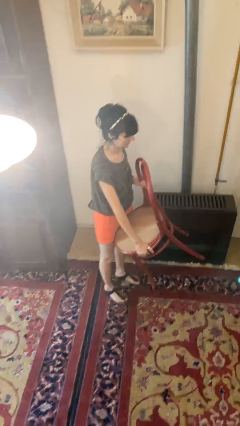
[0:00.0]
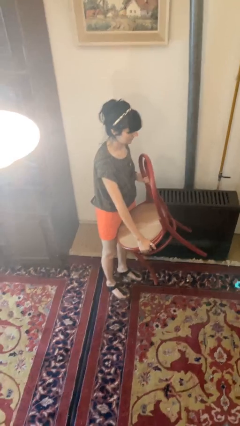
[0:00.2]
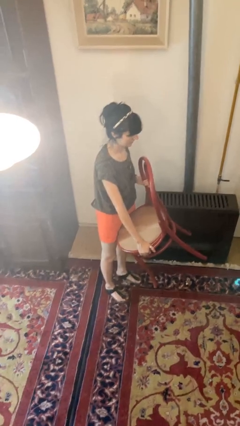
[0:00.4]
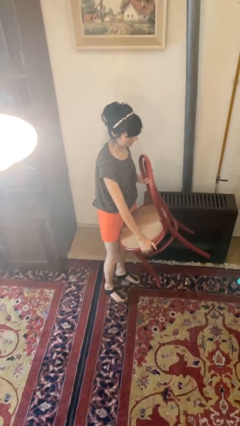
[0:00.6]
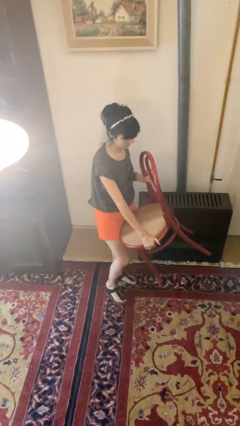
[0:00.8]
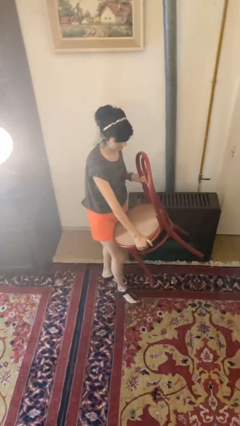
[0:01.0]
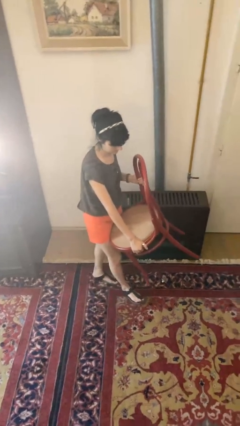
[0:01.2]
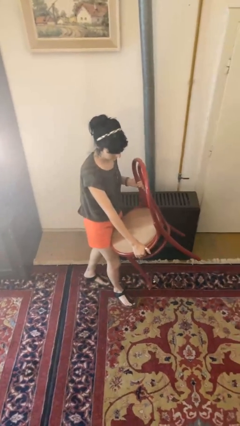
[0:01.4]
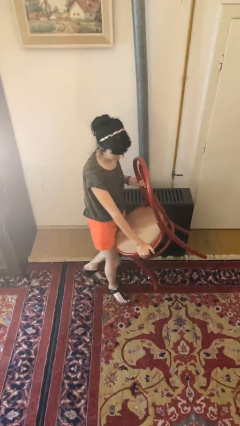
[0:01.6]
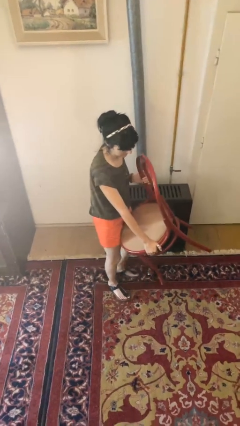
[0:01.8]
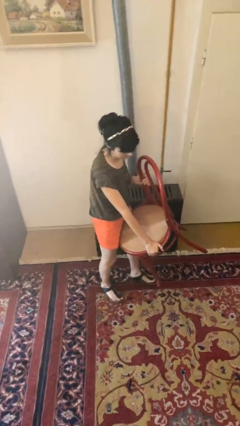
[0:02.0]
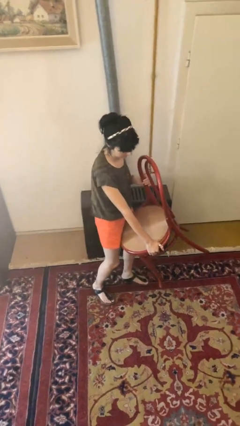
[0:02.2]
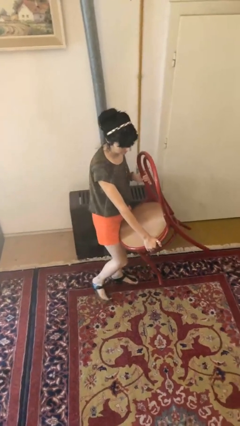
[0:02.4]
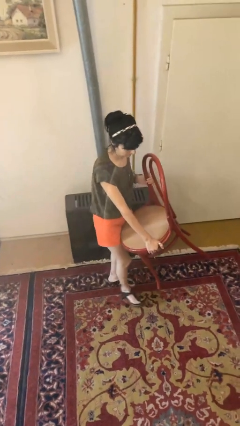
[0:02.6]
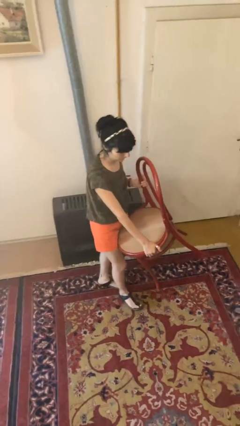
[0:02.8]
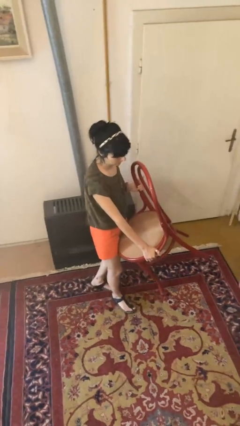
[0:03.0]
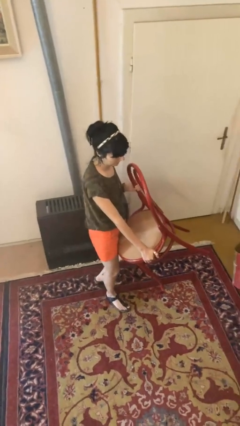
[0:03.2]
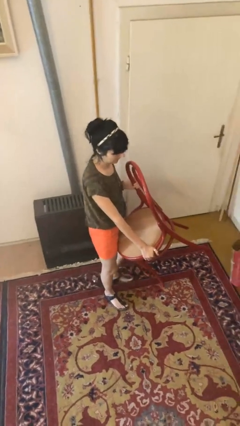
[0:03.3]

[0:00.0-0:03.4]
person carries furniture

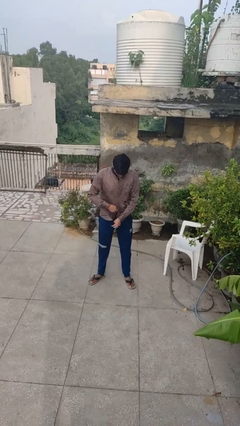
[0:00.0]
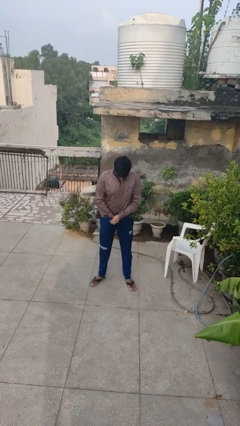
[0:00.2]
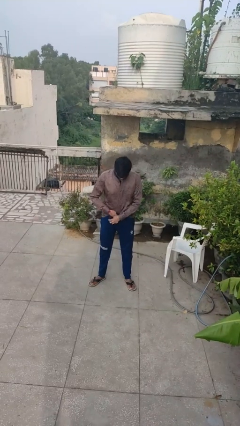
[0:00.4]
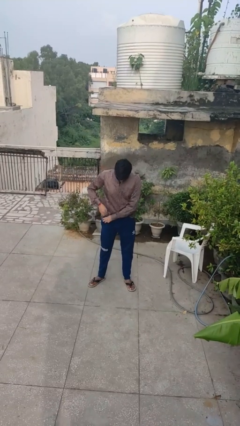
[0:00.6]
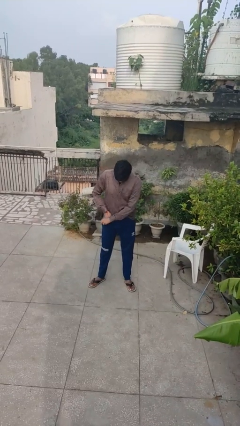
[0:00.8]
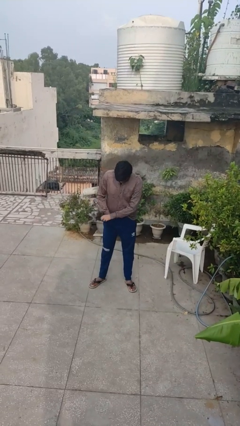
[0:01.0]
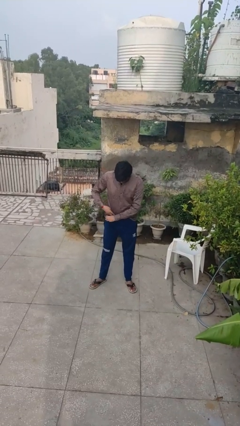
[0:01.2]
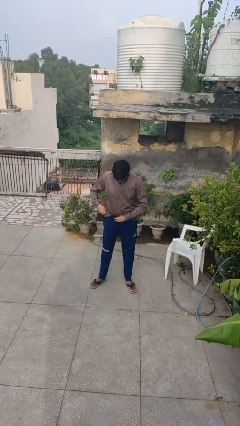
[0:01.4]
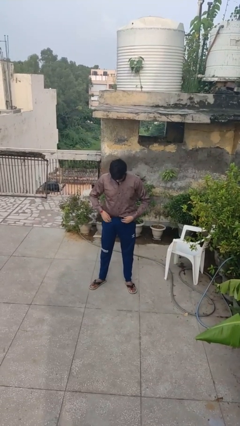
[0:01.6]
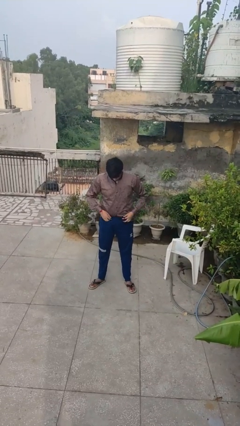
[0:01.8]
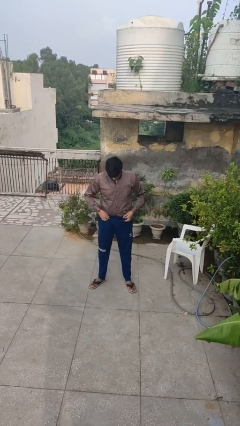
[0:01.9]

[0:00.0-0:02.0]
person tucks in shirt

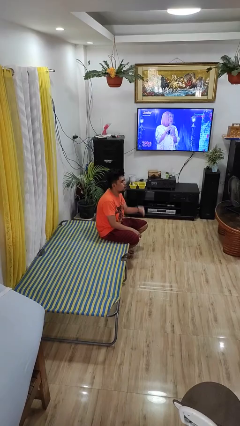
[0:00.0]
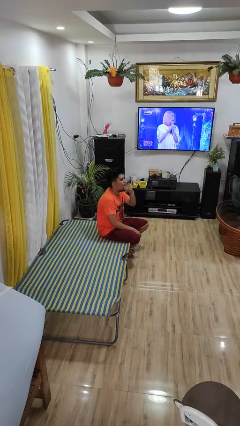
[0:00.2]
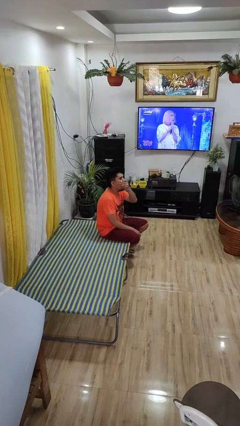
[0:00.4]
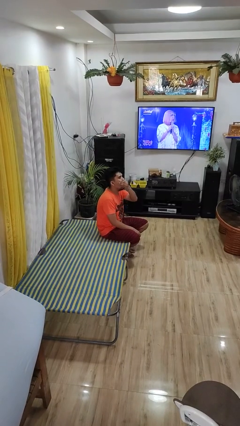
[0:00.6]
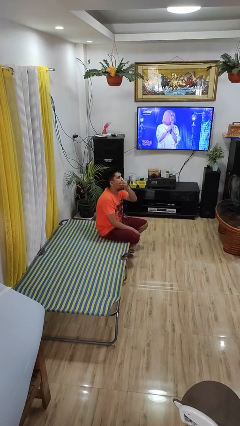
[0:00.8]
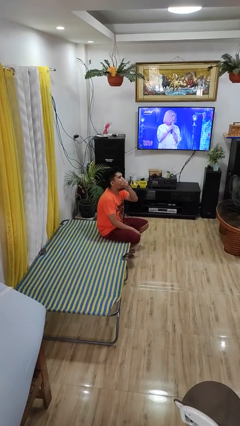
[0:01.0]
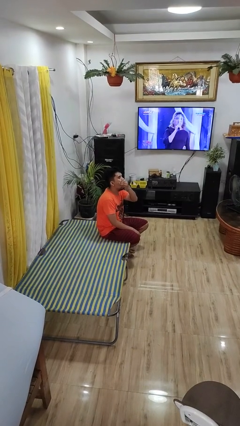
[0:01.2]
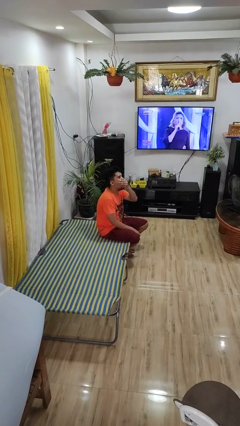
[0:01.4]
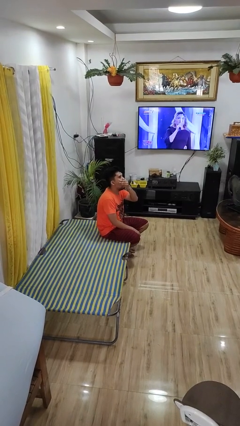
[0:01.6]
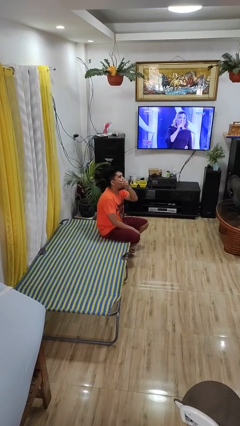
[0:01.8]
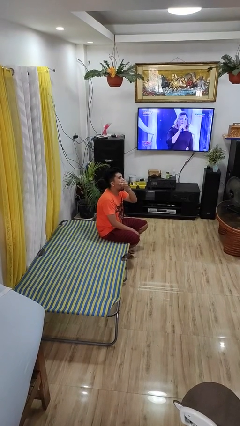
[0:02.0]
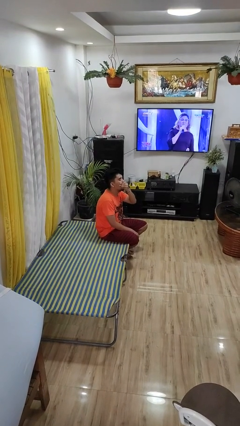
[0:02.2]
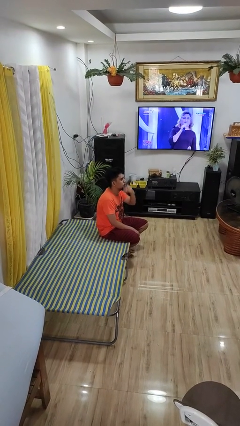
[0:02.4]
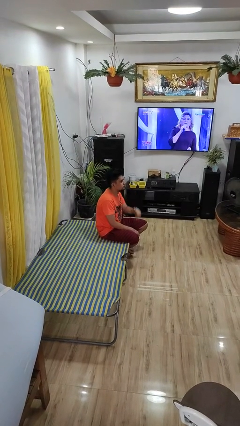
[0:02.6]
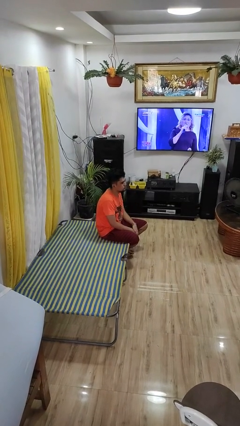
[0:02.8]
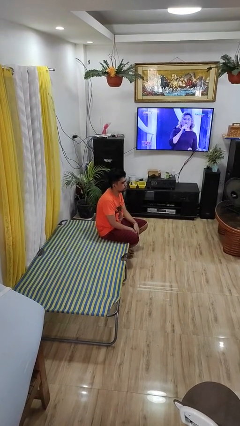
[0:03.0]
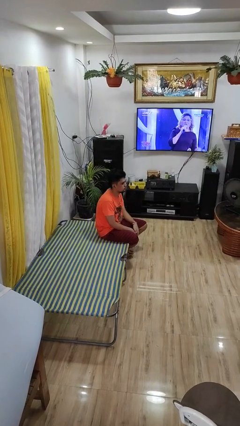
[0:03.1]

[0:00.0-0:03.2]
person yawns

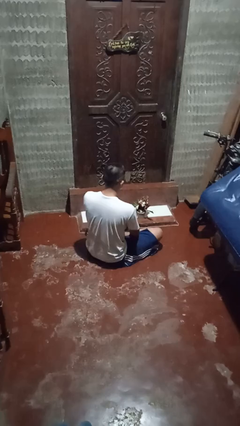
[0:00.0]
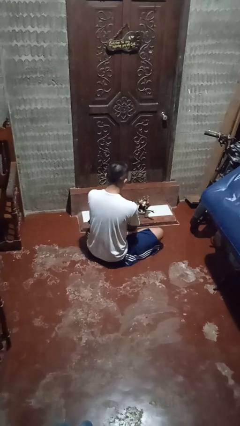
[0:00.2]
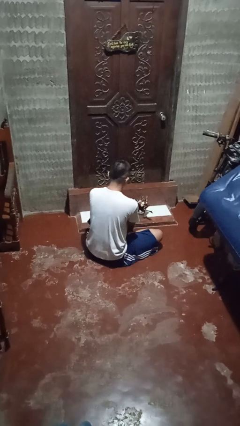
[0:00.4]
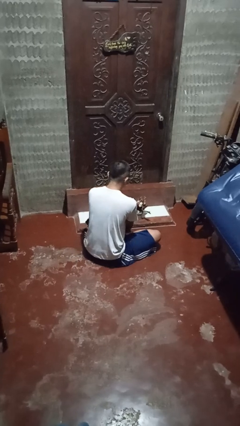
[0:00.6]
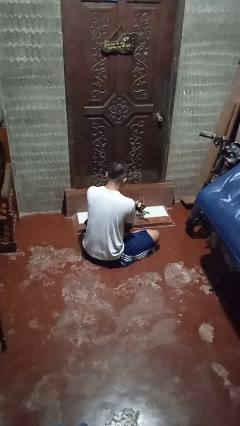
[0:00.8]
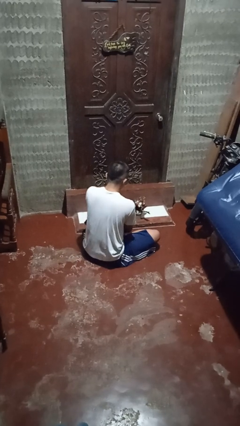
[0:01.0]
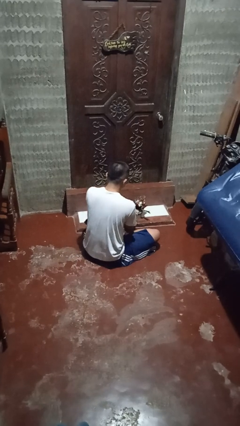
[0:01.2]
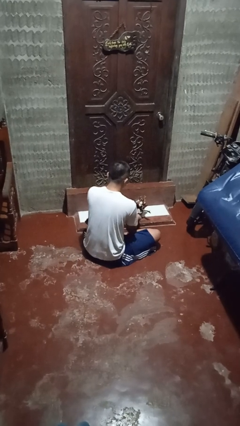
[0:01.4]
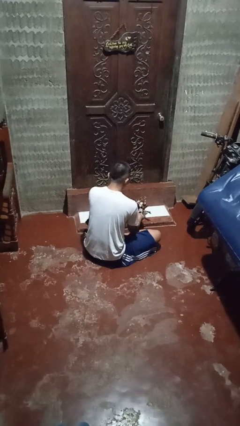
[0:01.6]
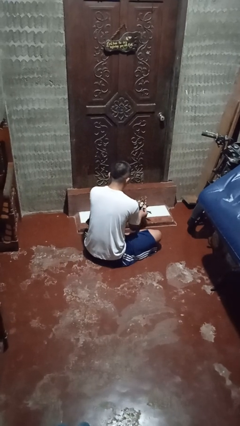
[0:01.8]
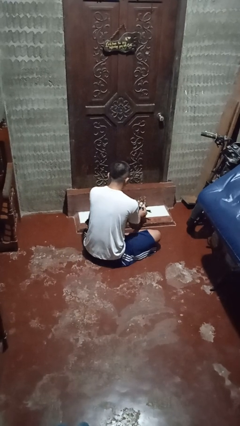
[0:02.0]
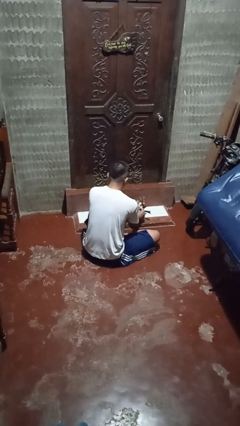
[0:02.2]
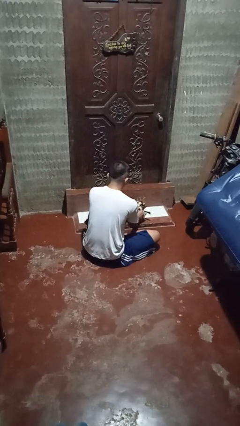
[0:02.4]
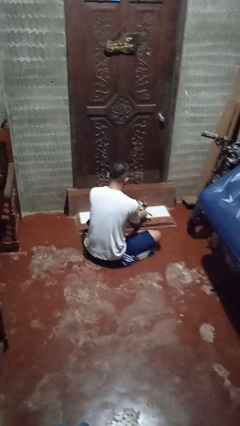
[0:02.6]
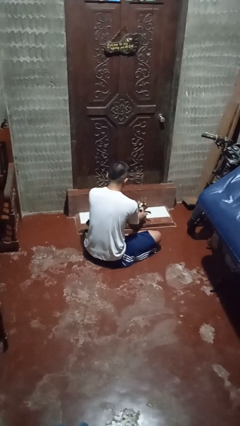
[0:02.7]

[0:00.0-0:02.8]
person arranges flowers in vase

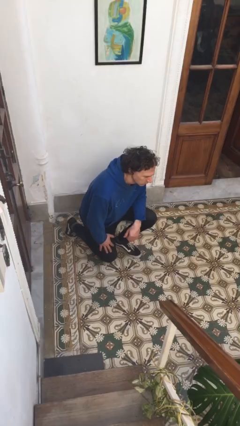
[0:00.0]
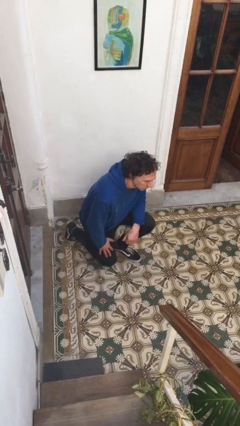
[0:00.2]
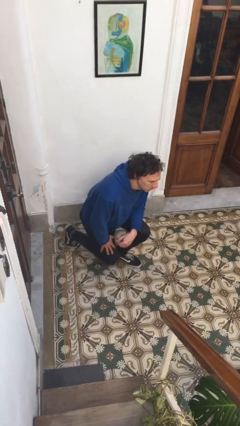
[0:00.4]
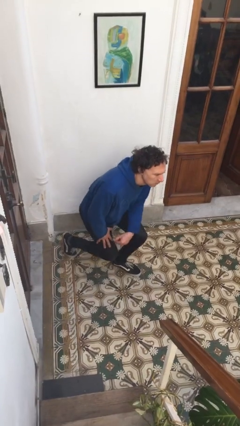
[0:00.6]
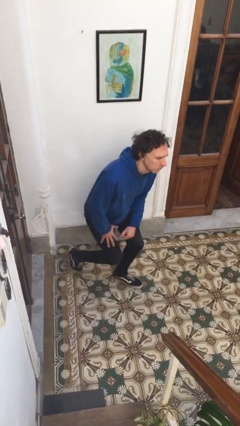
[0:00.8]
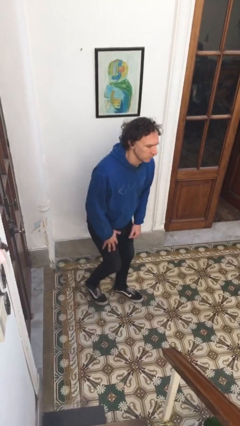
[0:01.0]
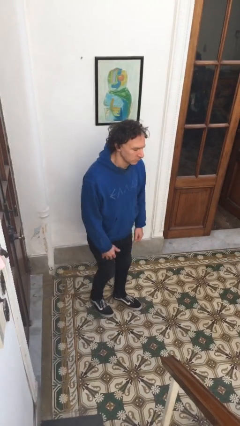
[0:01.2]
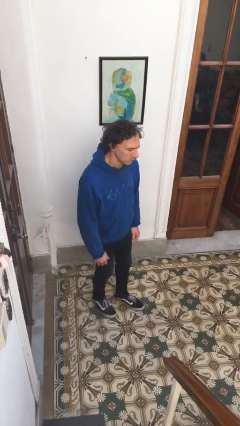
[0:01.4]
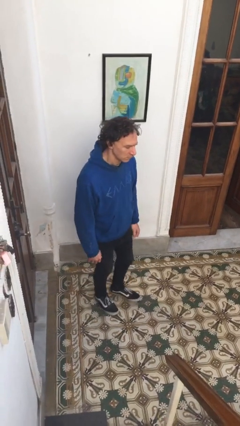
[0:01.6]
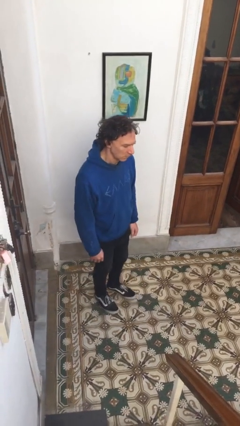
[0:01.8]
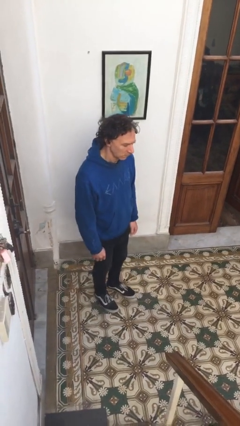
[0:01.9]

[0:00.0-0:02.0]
person stands up from floor

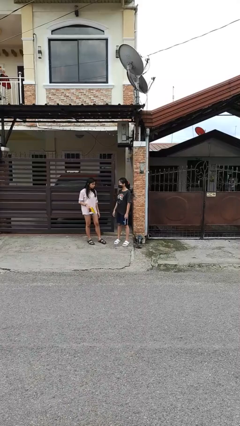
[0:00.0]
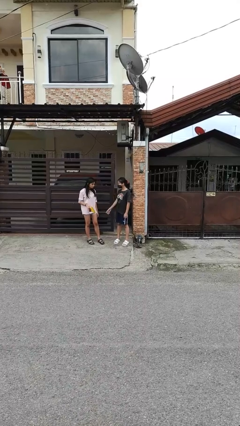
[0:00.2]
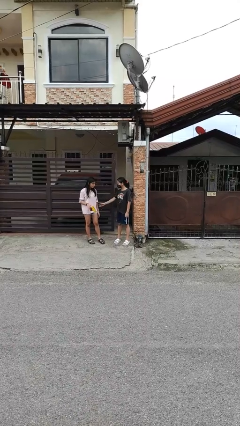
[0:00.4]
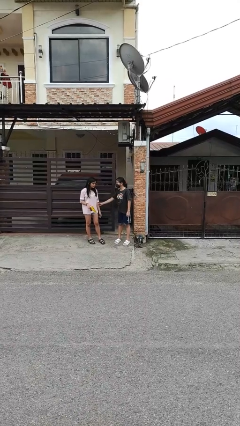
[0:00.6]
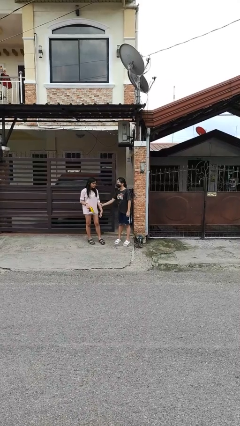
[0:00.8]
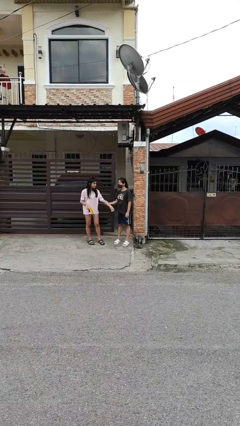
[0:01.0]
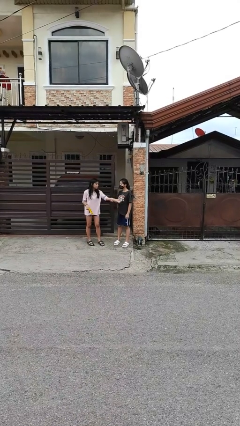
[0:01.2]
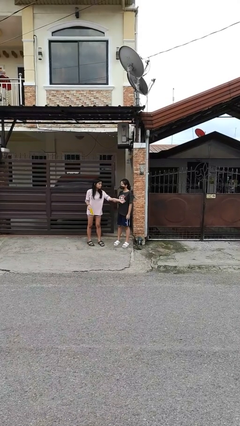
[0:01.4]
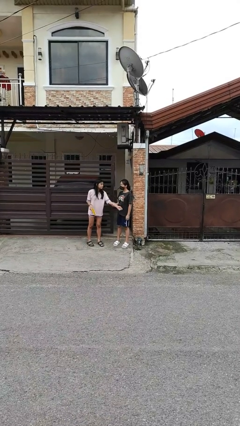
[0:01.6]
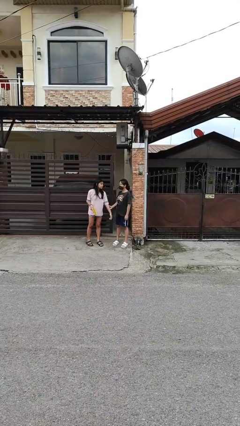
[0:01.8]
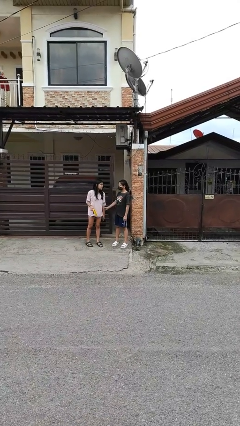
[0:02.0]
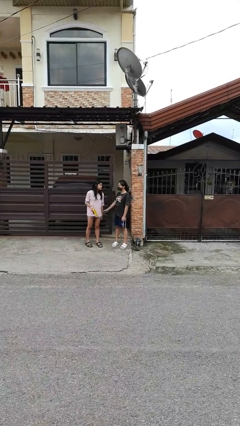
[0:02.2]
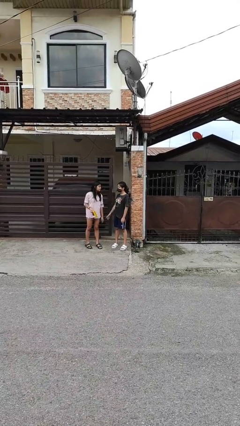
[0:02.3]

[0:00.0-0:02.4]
person grabs person by forearm

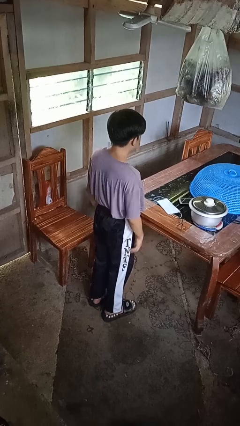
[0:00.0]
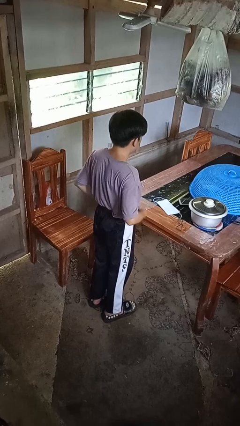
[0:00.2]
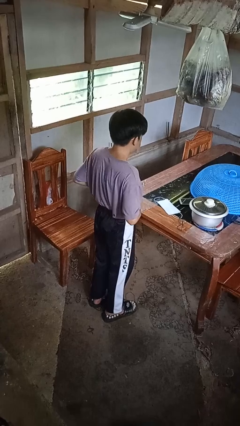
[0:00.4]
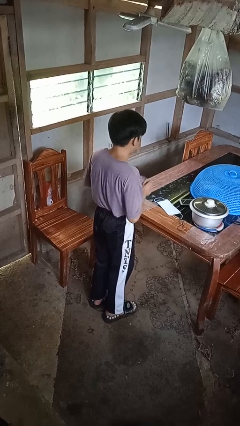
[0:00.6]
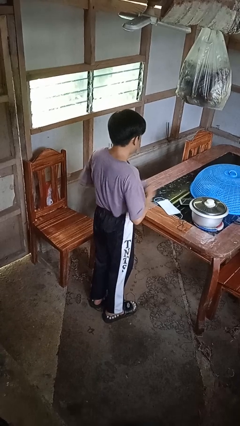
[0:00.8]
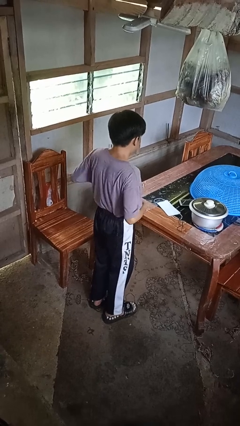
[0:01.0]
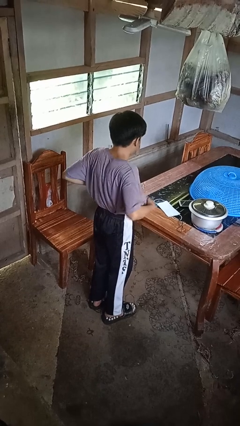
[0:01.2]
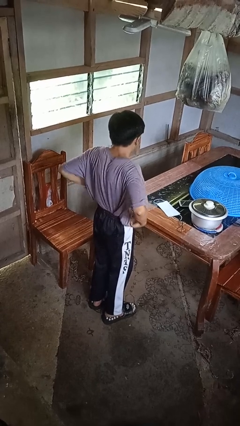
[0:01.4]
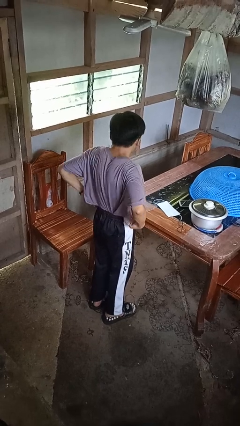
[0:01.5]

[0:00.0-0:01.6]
person untucks shirt
